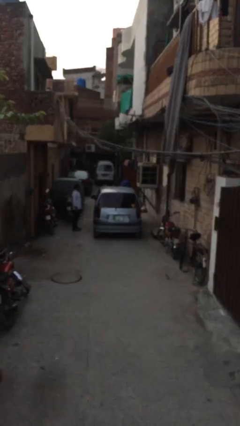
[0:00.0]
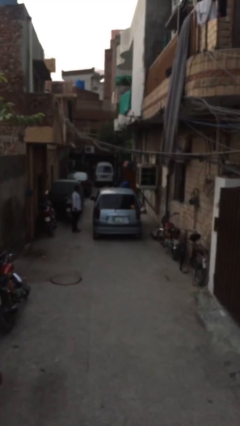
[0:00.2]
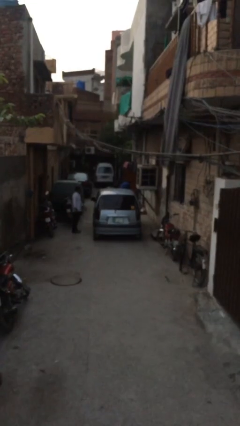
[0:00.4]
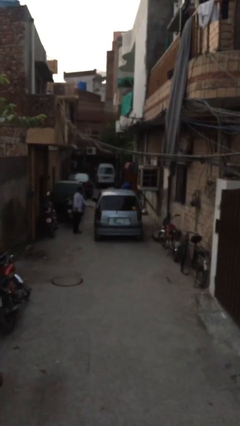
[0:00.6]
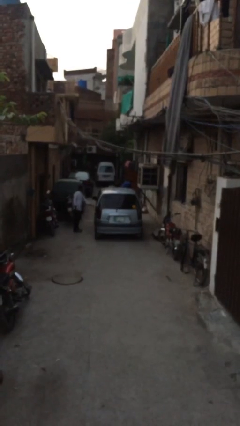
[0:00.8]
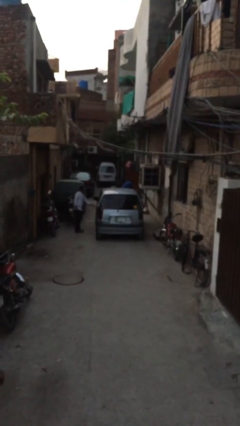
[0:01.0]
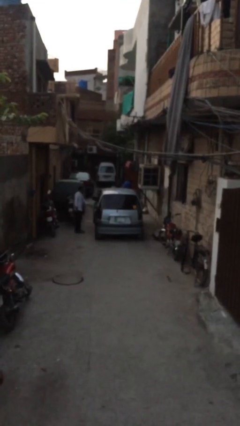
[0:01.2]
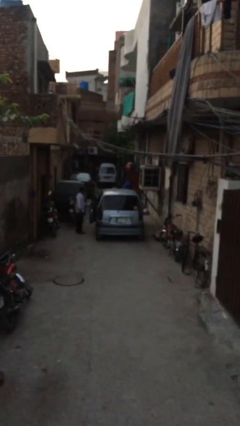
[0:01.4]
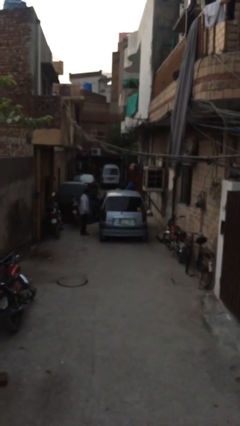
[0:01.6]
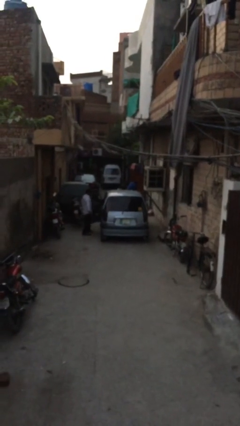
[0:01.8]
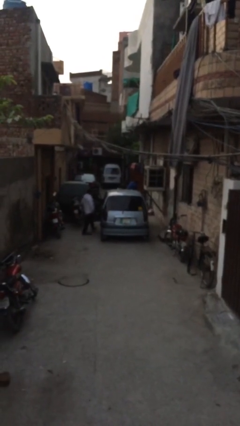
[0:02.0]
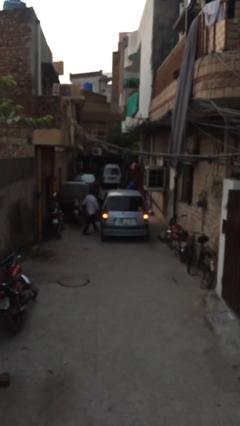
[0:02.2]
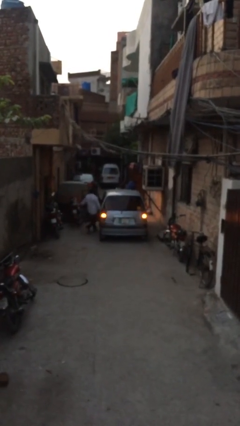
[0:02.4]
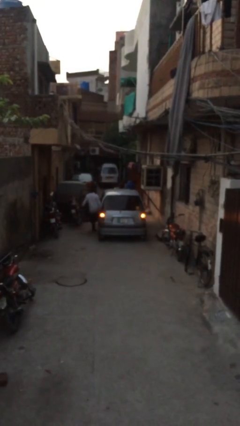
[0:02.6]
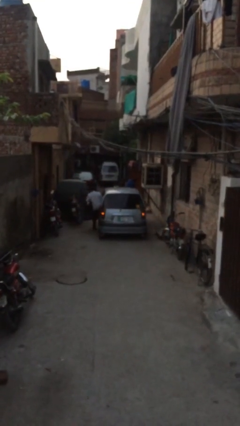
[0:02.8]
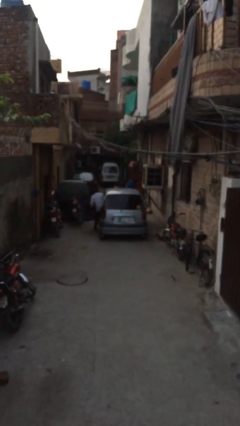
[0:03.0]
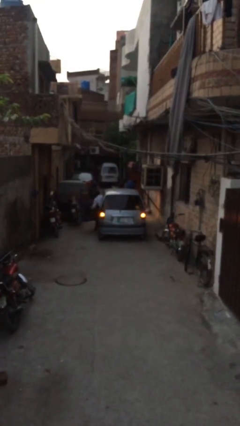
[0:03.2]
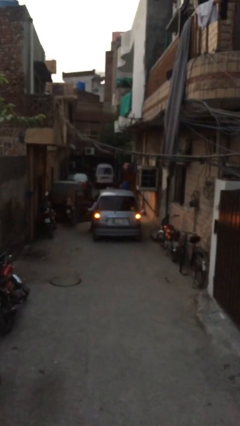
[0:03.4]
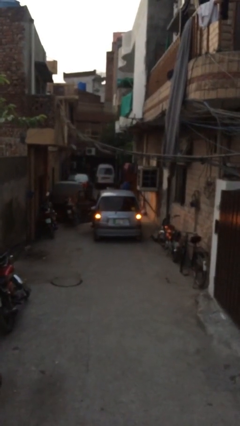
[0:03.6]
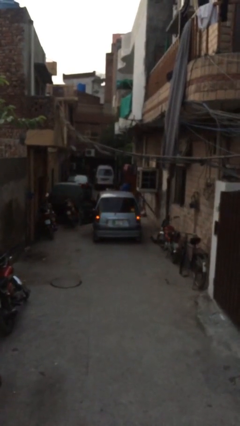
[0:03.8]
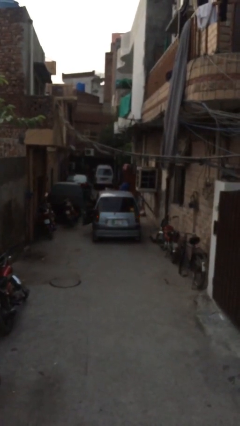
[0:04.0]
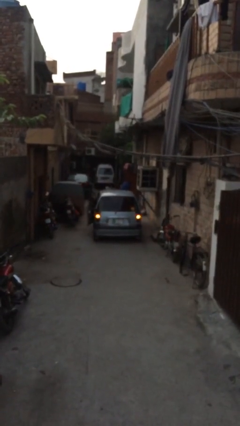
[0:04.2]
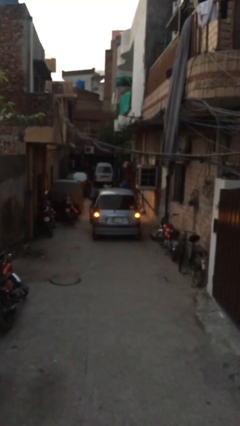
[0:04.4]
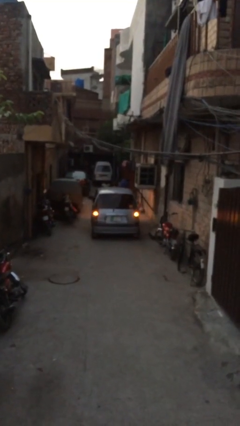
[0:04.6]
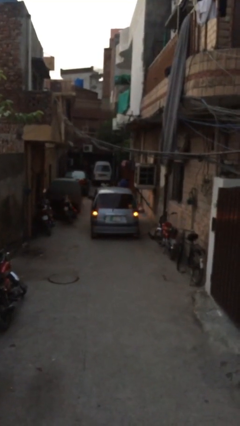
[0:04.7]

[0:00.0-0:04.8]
car picks up person

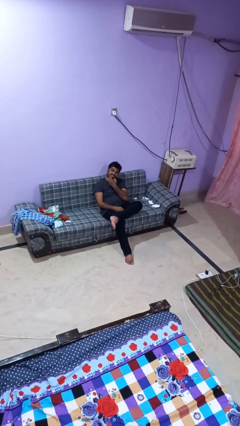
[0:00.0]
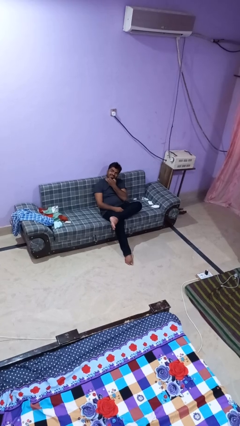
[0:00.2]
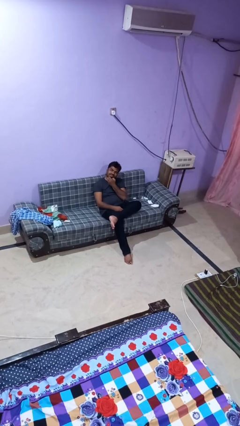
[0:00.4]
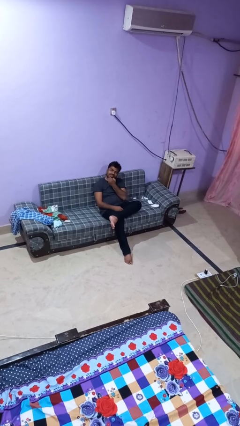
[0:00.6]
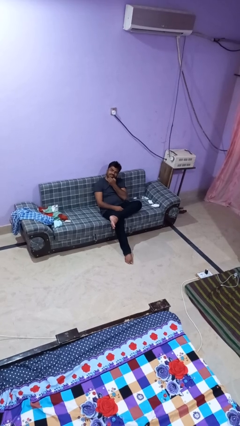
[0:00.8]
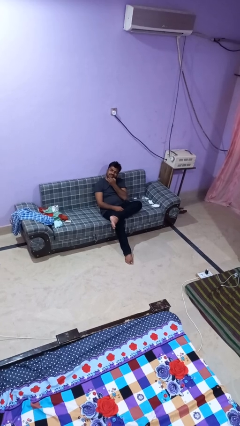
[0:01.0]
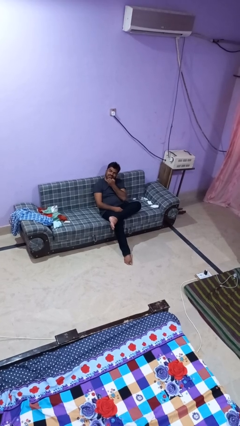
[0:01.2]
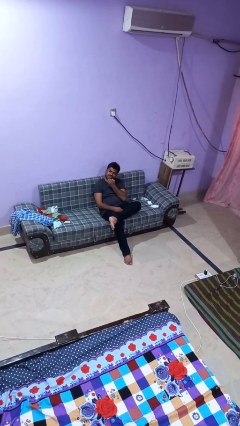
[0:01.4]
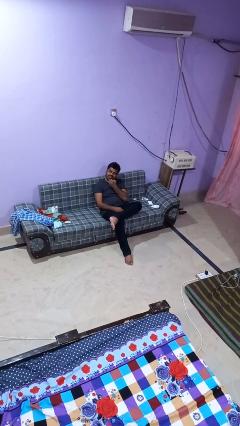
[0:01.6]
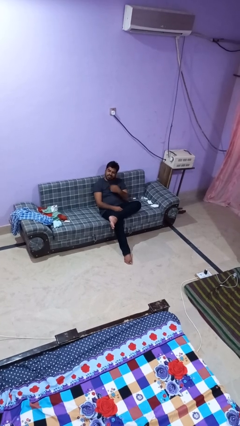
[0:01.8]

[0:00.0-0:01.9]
person strokes chin

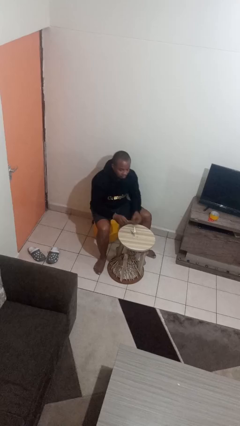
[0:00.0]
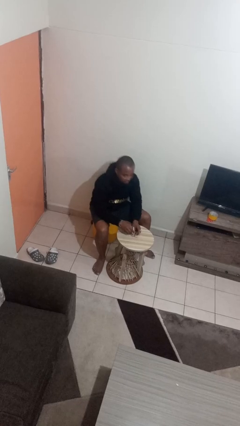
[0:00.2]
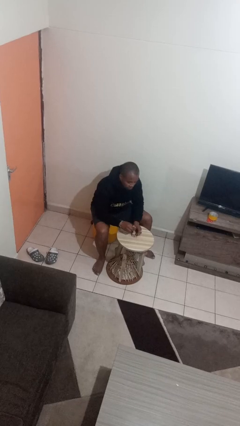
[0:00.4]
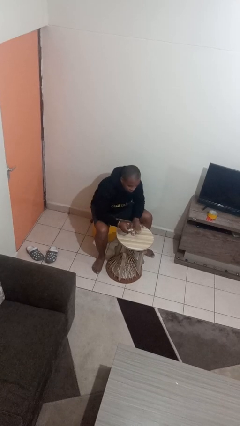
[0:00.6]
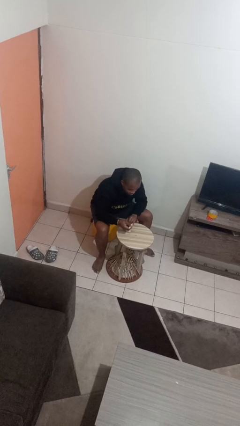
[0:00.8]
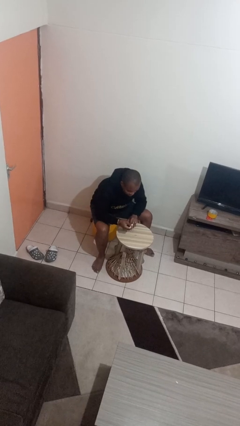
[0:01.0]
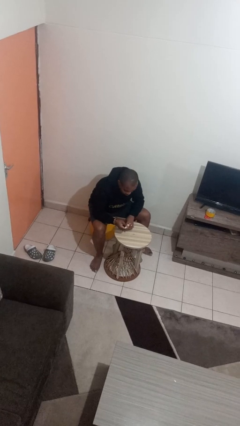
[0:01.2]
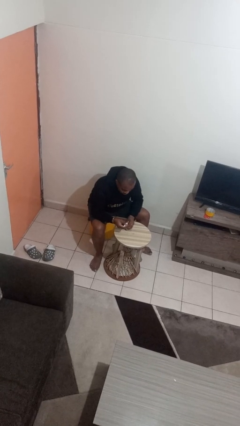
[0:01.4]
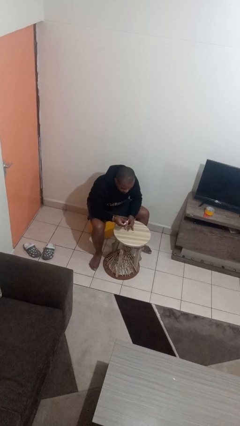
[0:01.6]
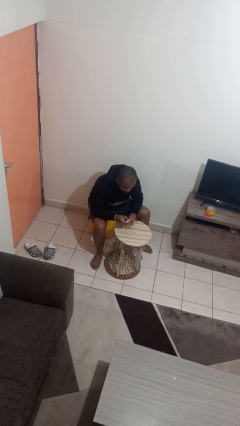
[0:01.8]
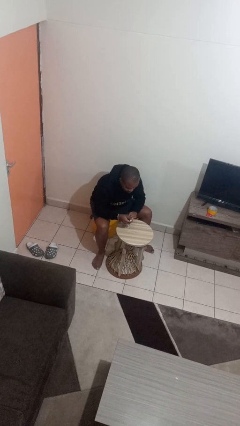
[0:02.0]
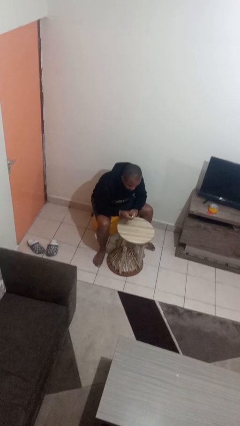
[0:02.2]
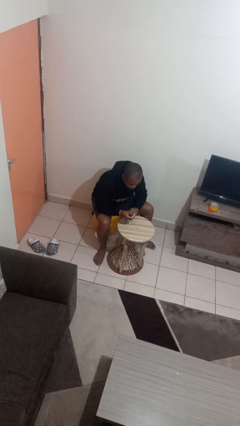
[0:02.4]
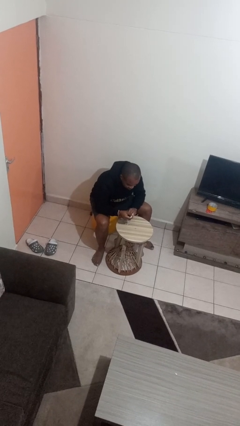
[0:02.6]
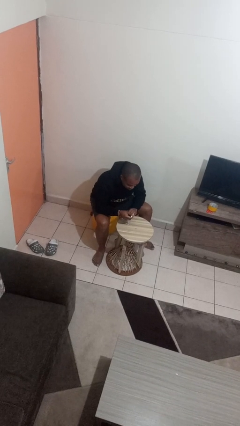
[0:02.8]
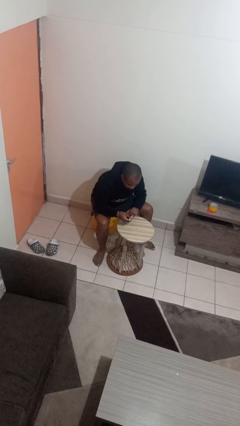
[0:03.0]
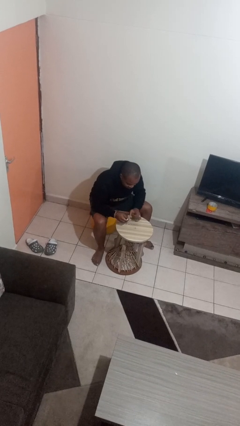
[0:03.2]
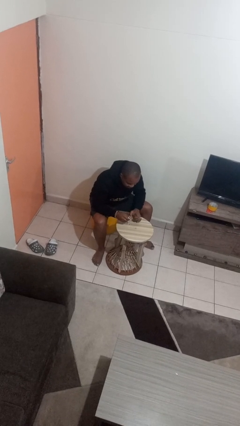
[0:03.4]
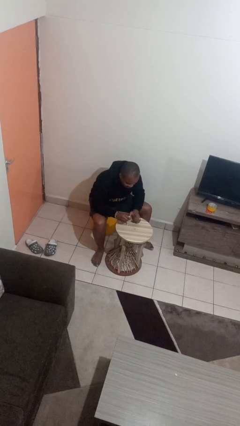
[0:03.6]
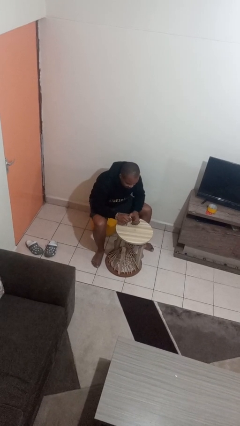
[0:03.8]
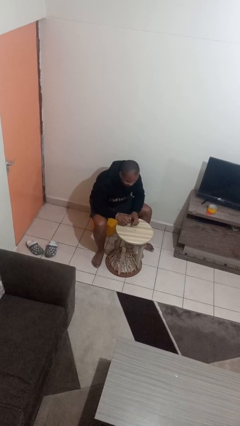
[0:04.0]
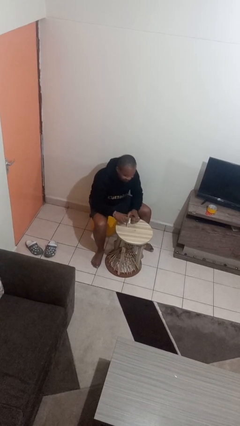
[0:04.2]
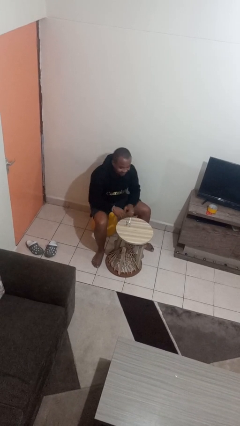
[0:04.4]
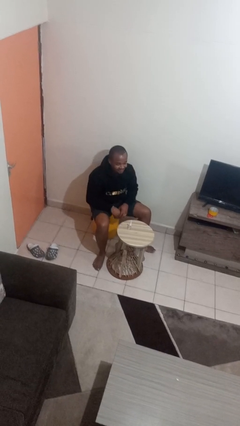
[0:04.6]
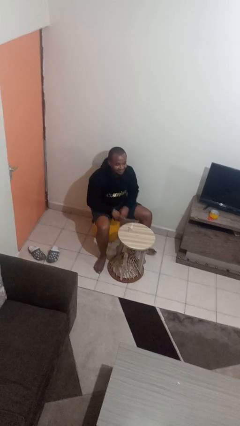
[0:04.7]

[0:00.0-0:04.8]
person paints fingernails

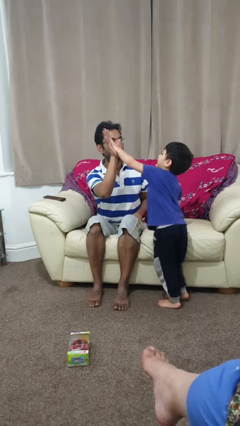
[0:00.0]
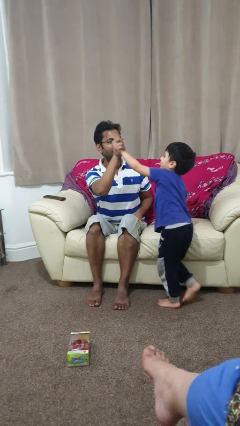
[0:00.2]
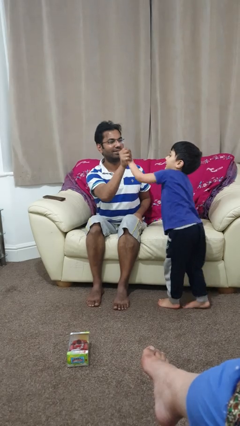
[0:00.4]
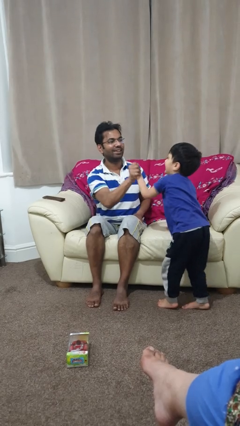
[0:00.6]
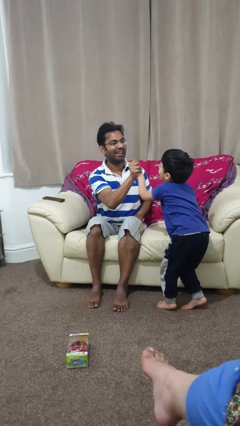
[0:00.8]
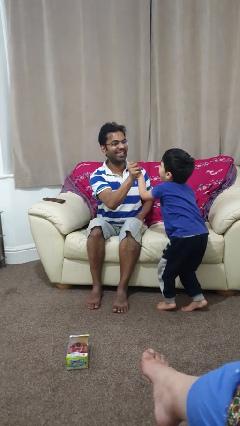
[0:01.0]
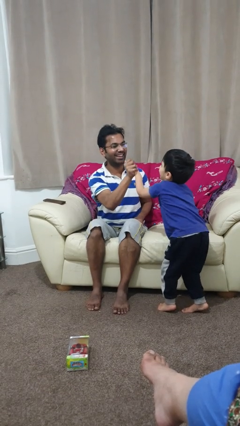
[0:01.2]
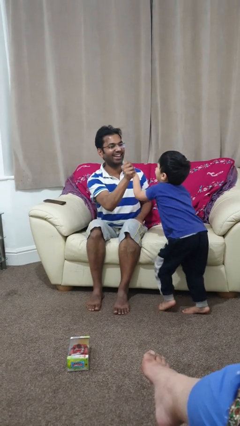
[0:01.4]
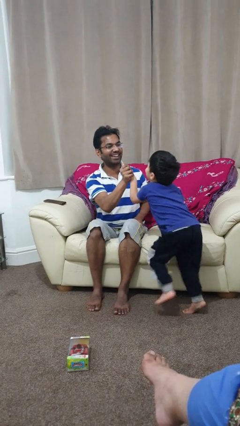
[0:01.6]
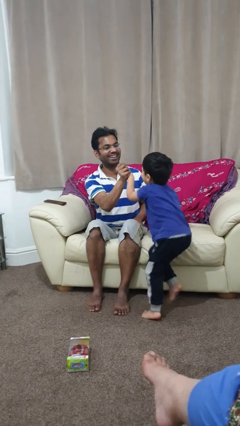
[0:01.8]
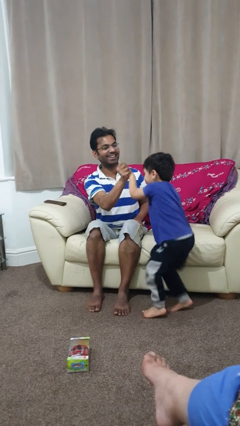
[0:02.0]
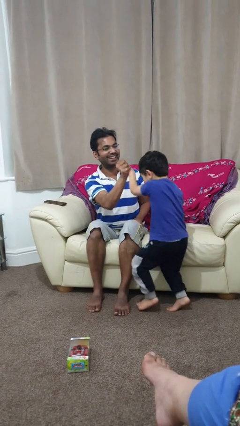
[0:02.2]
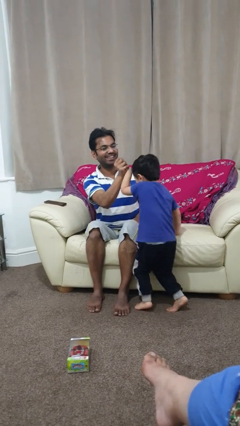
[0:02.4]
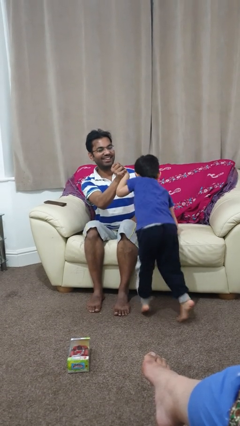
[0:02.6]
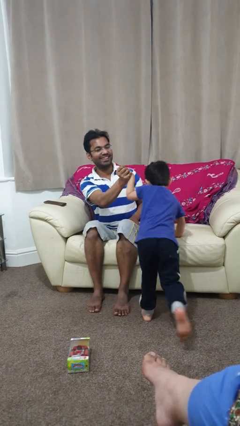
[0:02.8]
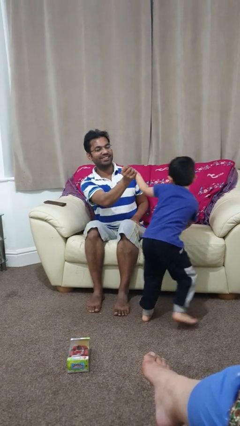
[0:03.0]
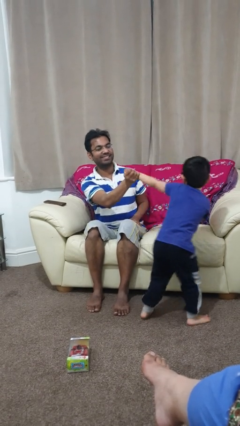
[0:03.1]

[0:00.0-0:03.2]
person highfives hand

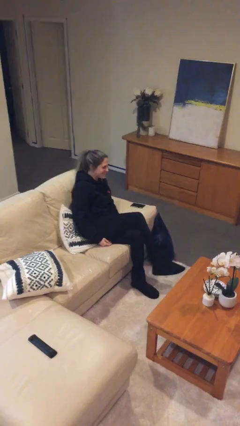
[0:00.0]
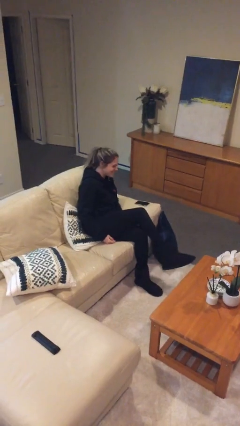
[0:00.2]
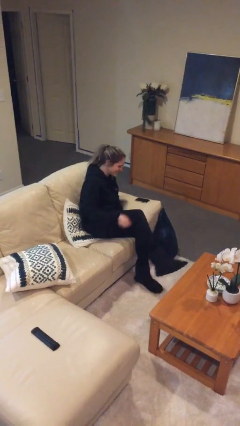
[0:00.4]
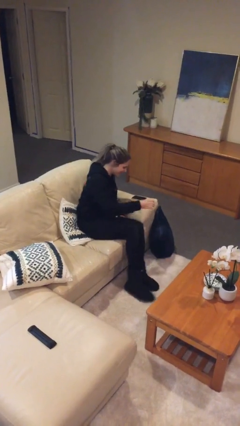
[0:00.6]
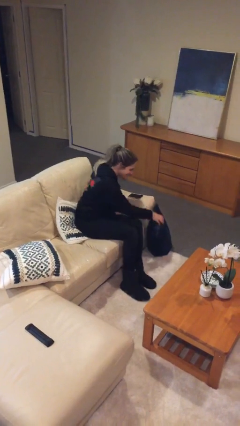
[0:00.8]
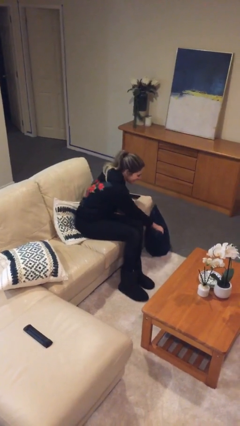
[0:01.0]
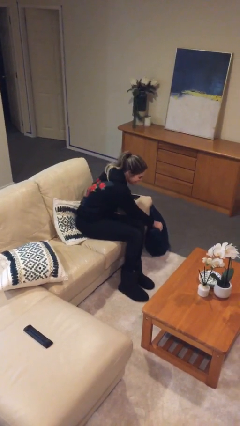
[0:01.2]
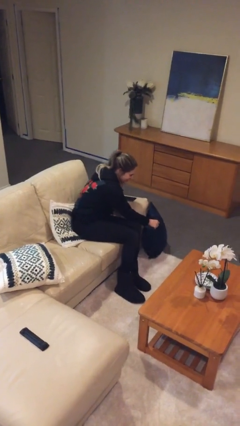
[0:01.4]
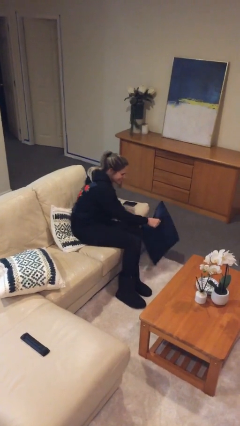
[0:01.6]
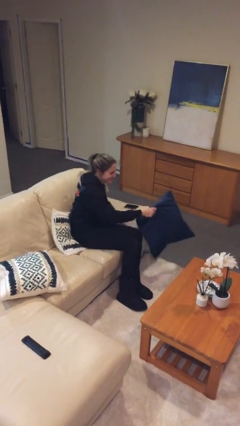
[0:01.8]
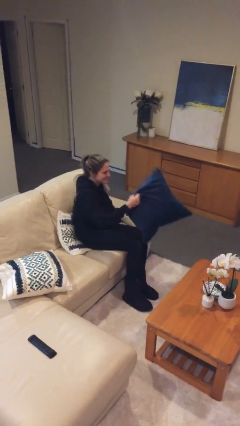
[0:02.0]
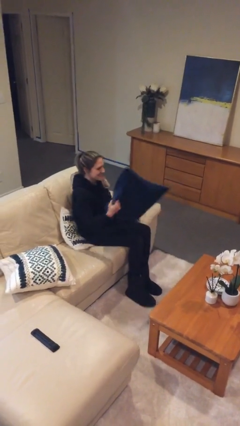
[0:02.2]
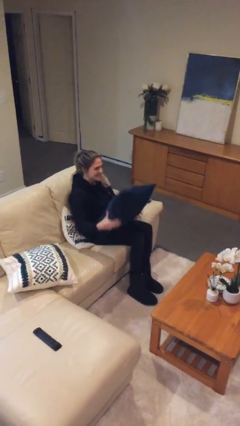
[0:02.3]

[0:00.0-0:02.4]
person picks up object from floor

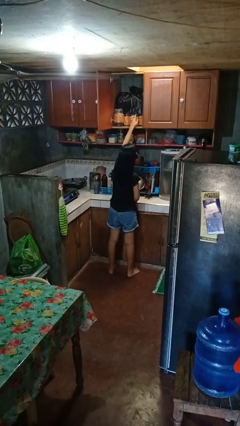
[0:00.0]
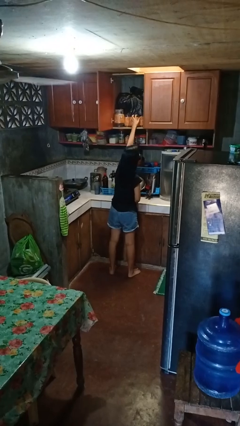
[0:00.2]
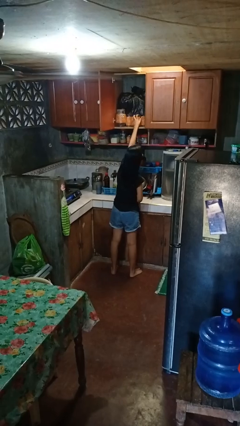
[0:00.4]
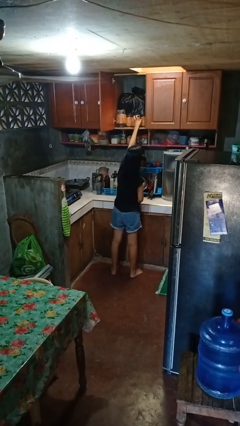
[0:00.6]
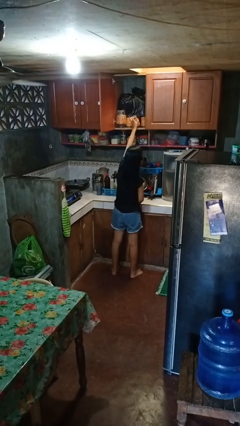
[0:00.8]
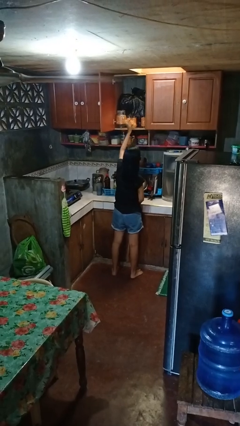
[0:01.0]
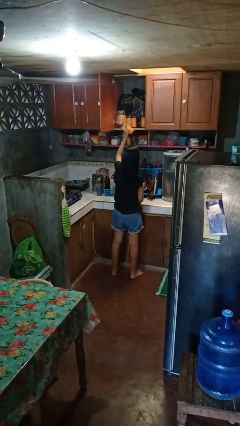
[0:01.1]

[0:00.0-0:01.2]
person picks up object from cabinet
